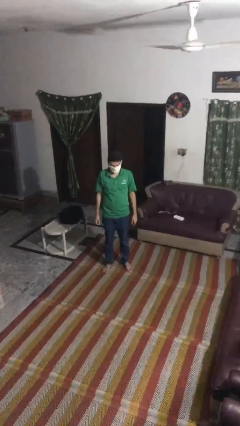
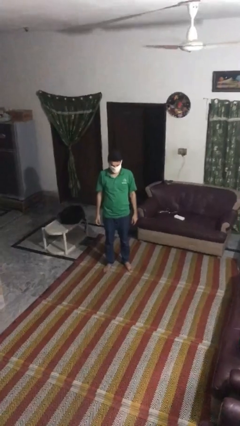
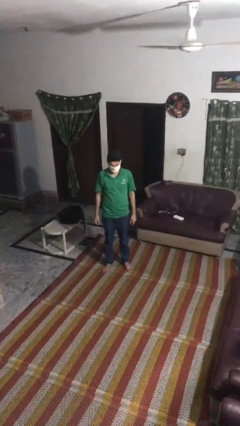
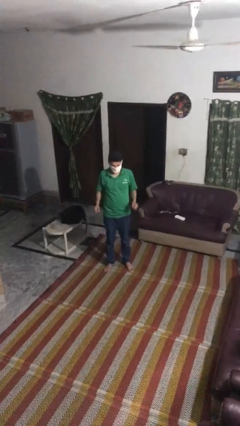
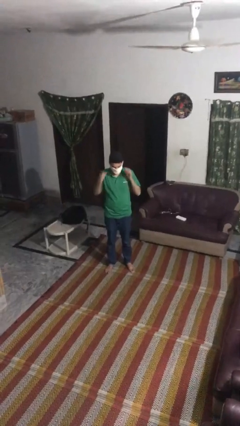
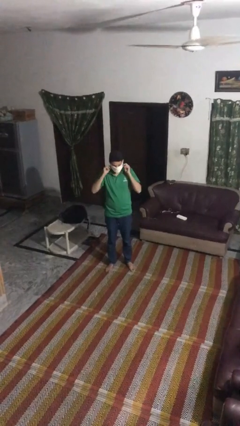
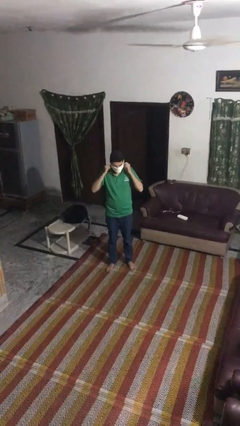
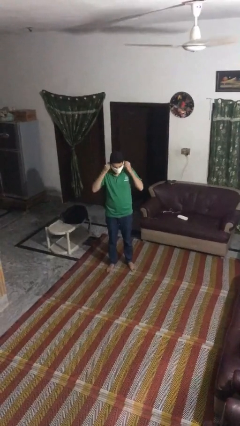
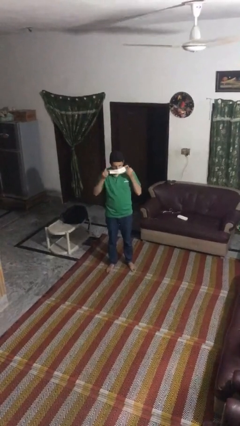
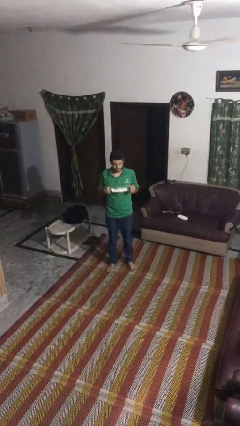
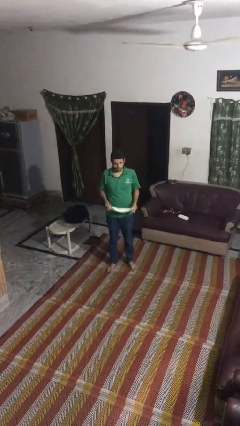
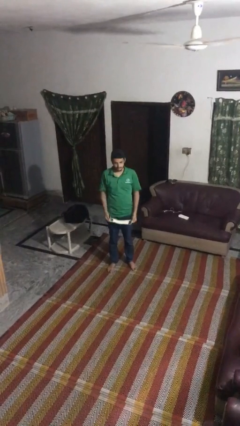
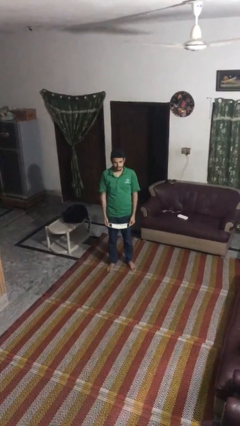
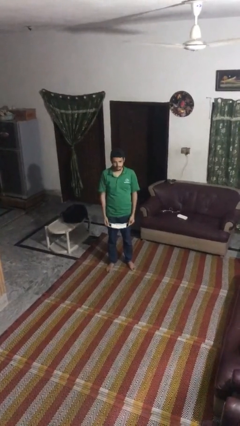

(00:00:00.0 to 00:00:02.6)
person takes off facemask

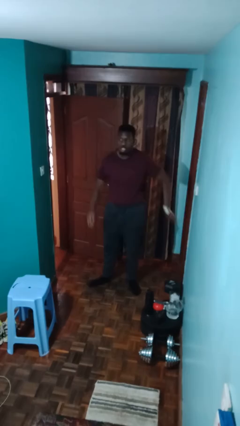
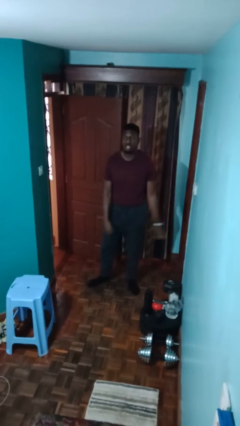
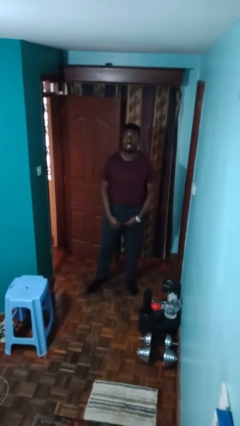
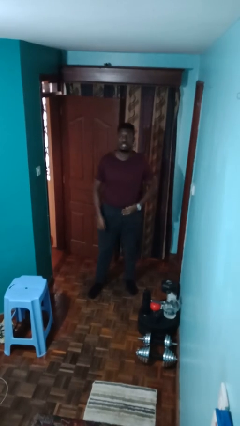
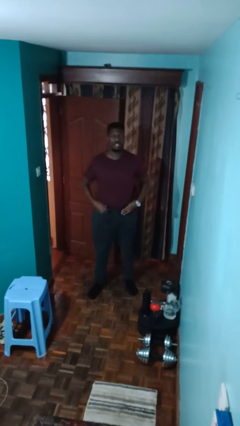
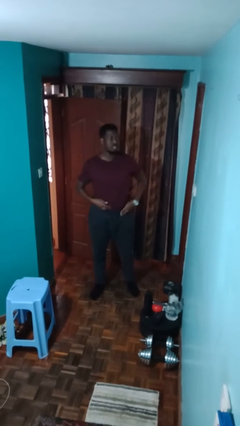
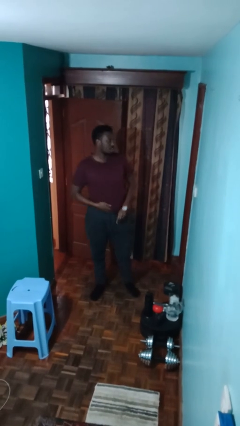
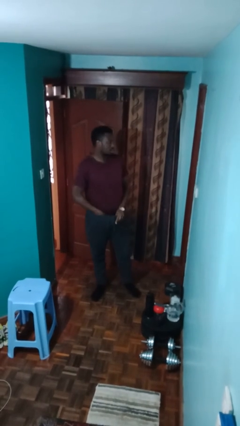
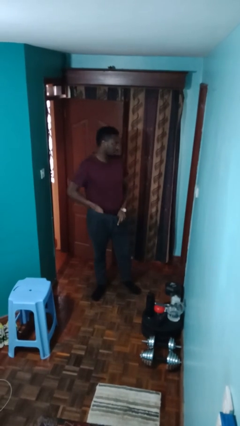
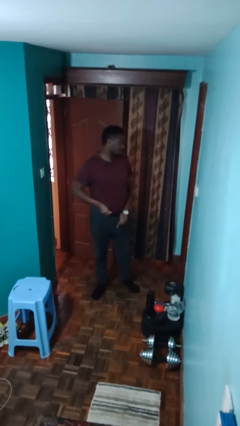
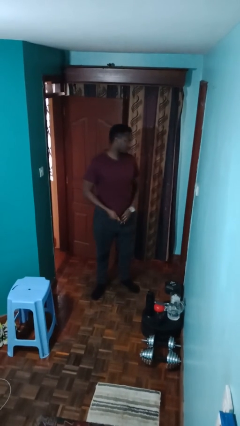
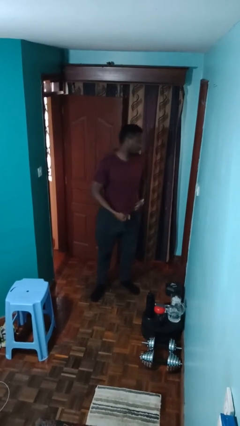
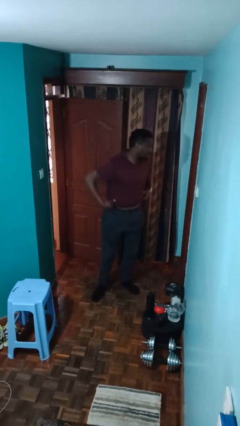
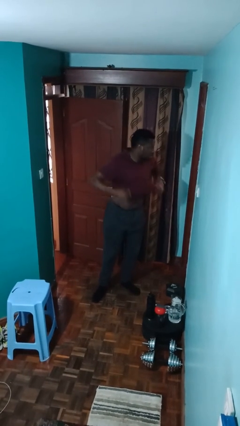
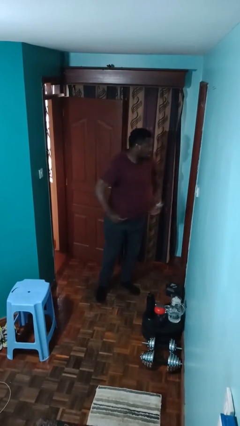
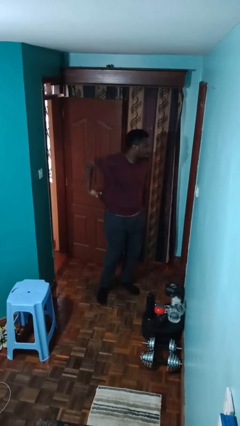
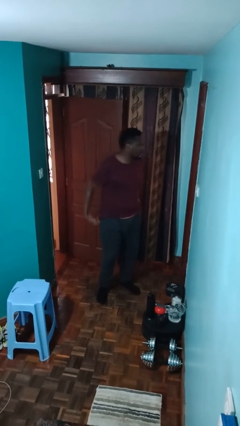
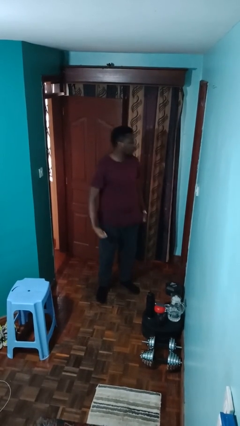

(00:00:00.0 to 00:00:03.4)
person untucks shirt

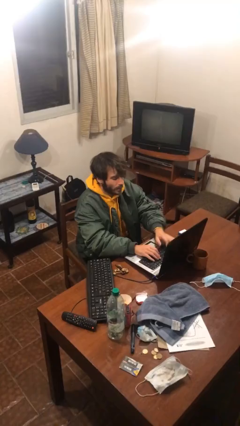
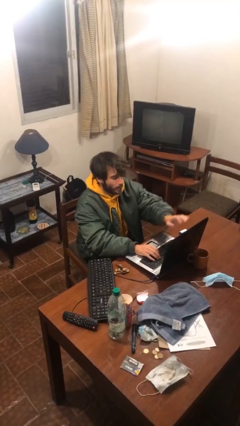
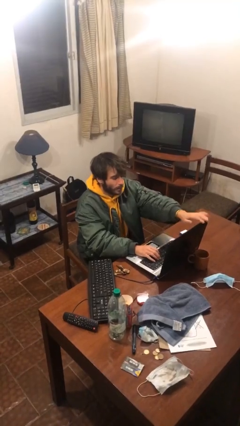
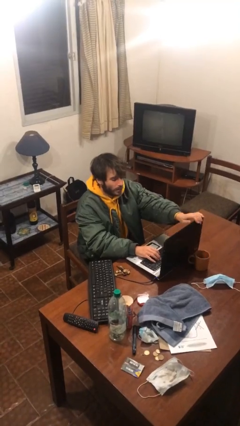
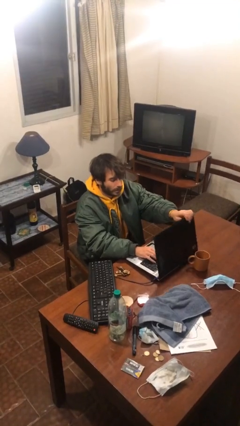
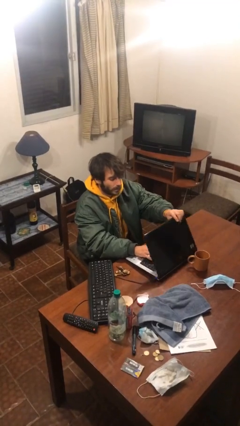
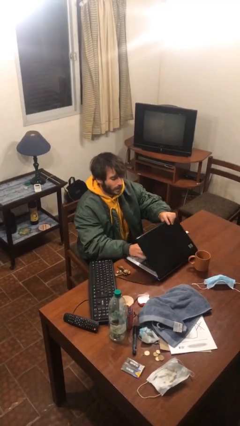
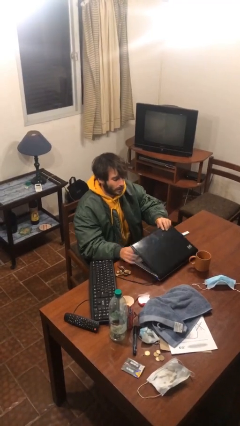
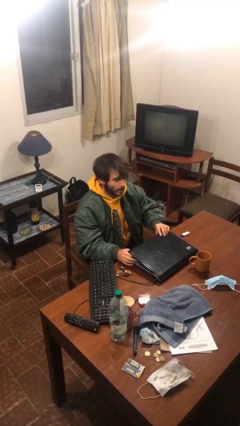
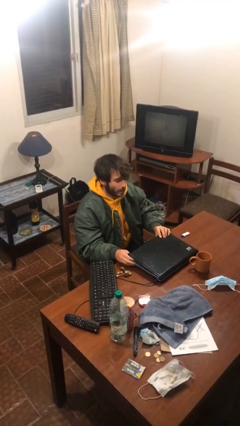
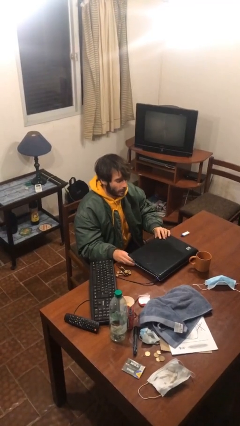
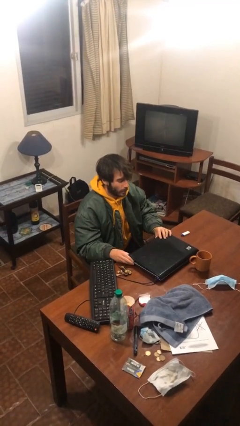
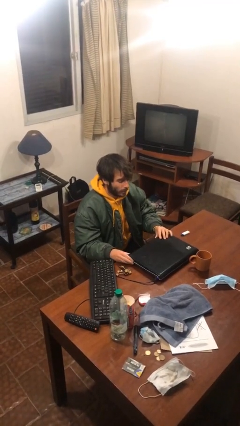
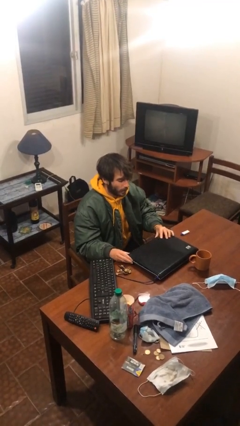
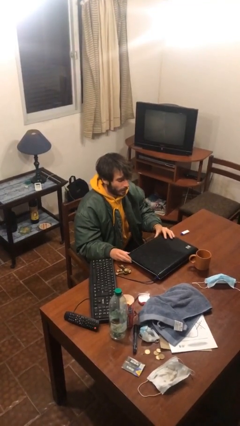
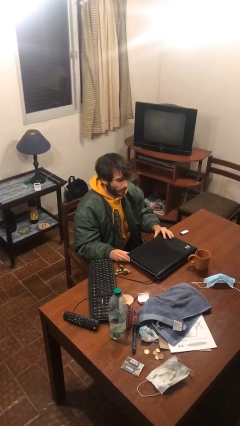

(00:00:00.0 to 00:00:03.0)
person interacts with laptop

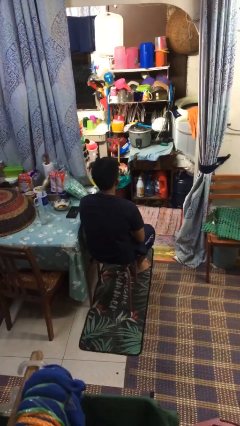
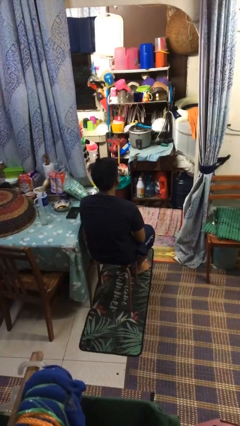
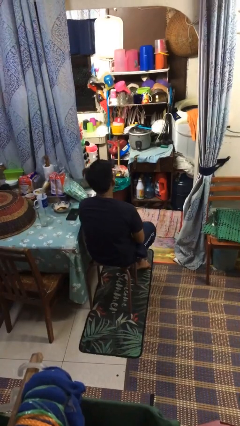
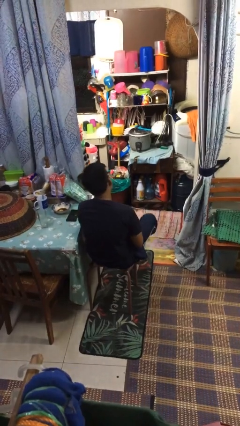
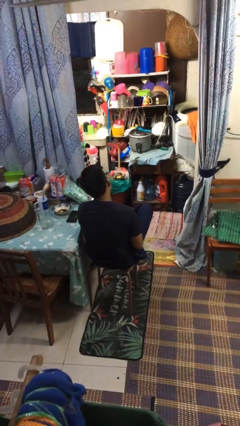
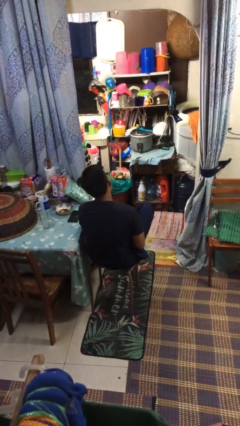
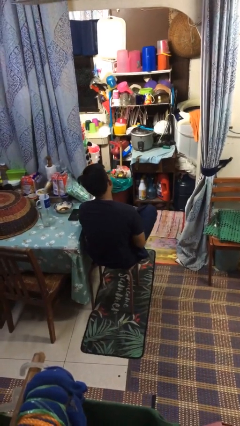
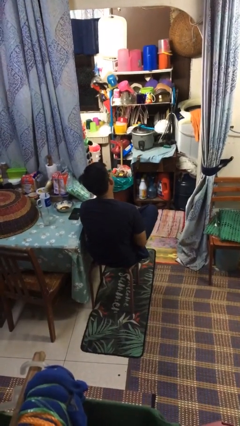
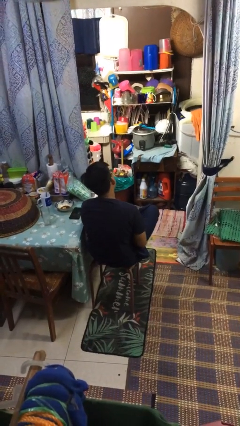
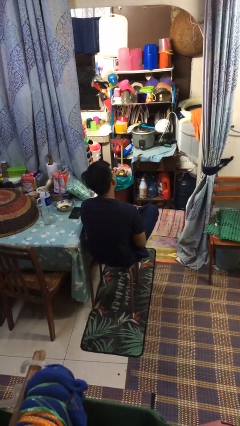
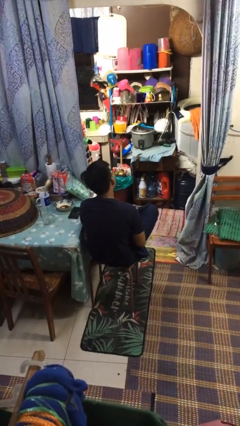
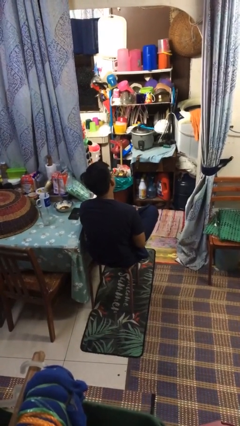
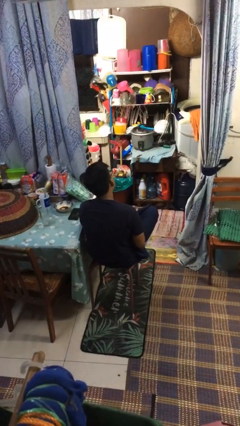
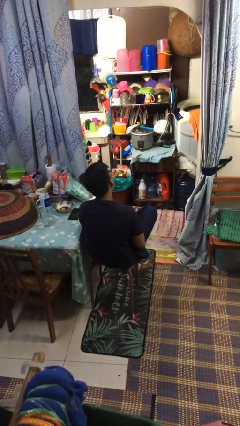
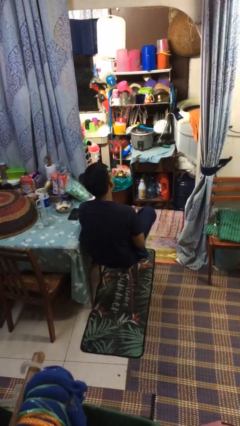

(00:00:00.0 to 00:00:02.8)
person crosses legs

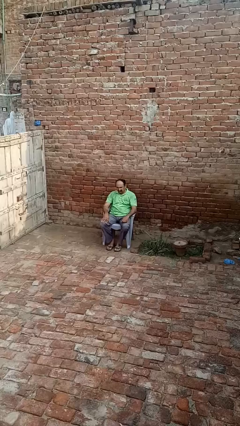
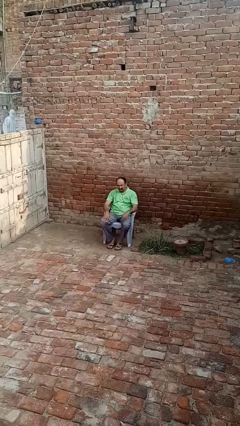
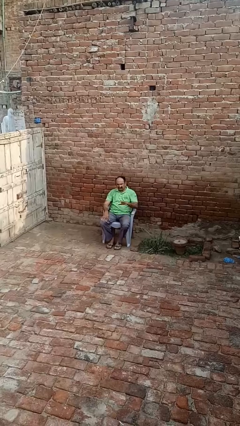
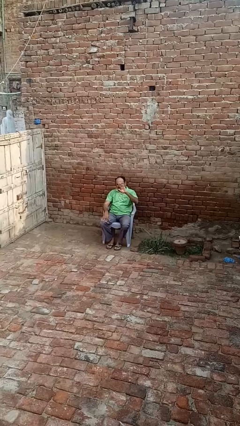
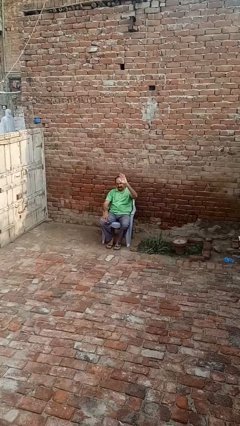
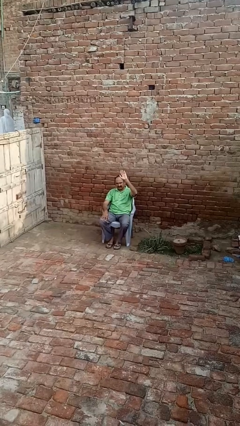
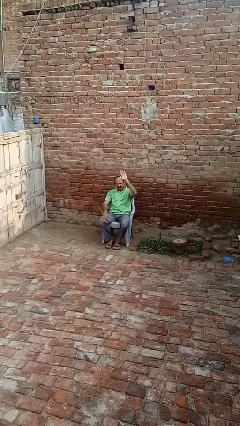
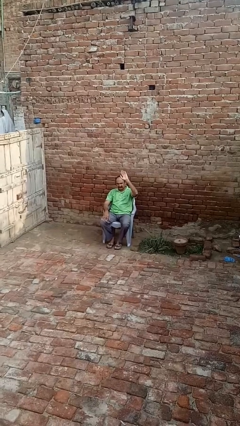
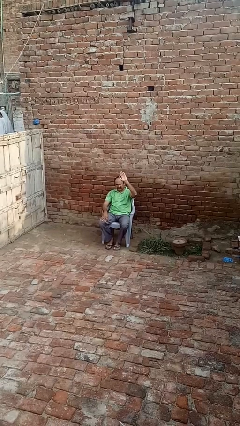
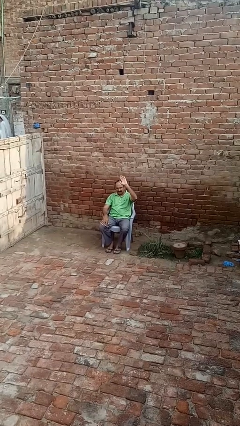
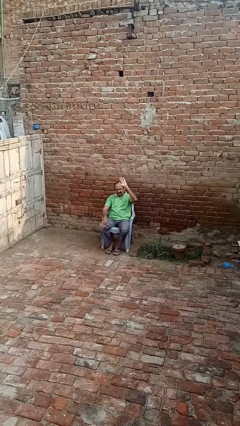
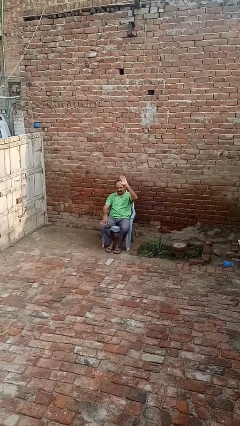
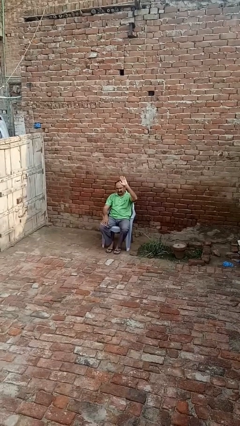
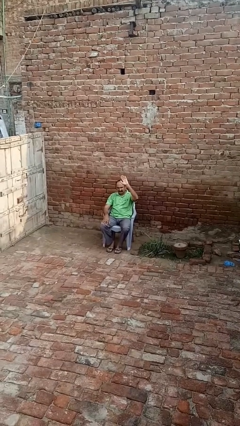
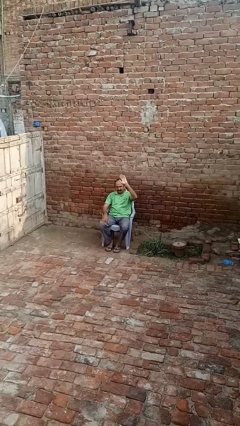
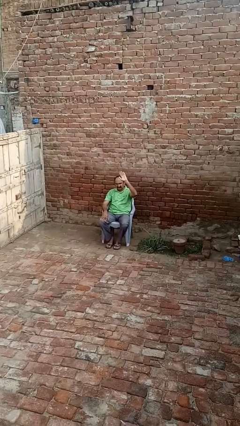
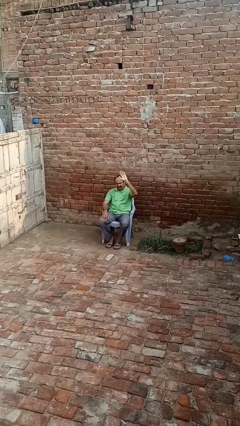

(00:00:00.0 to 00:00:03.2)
person gestures raise hand

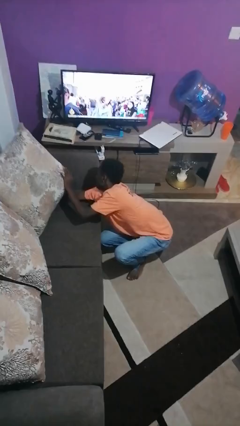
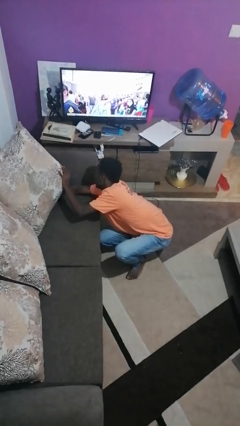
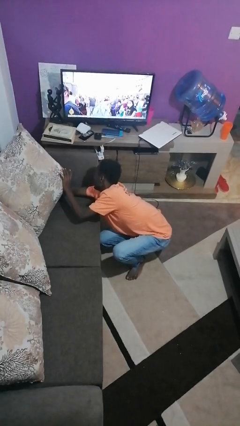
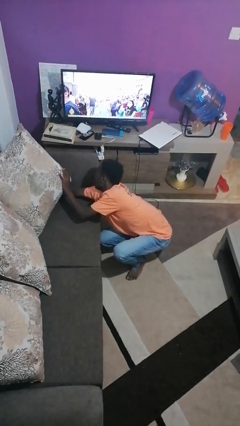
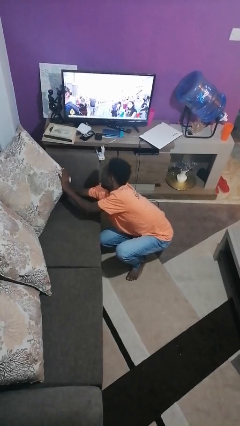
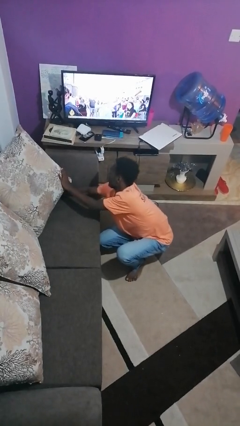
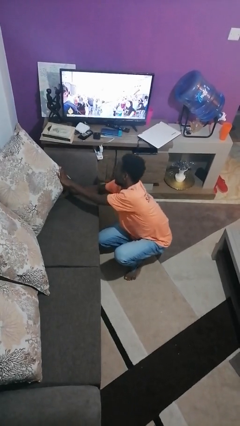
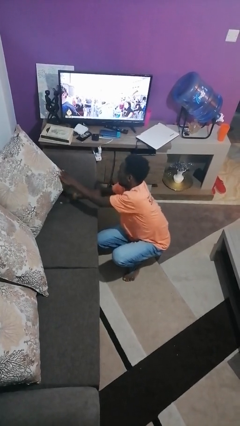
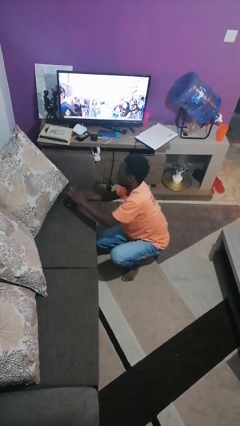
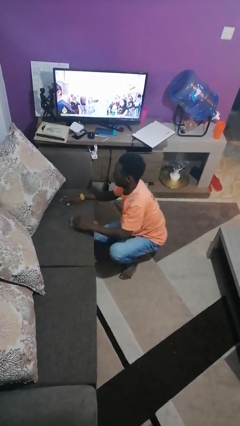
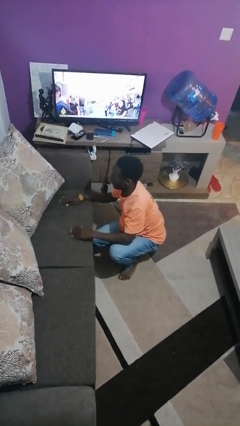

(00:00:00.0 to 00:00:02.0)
person searches in couch

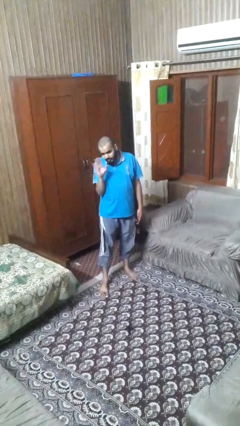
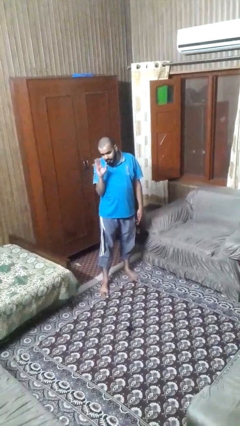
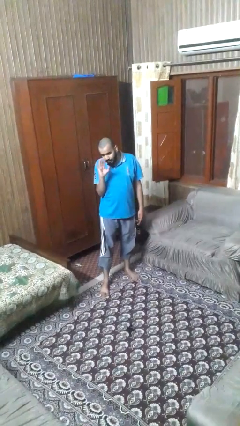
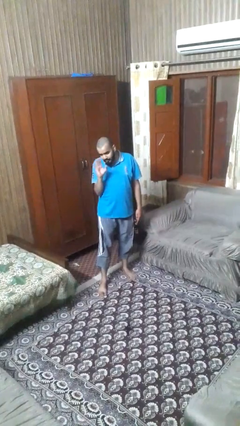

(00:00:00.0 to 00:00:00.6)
person waves at person
